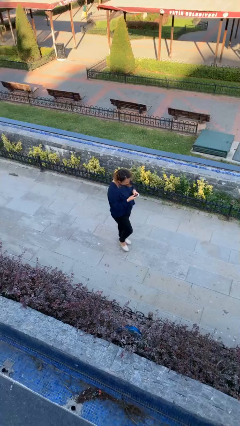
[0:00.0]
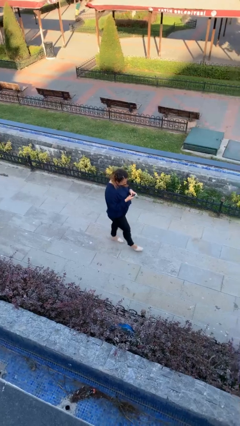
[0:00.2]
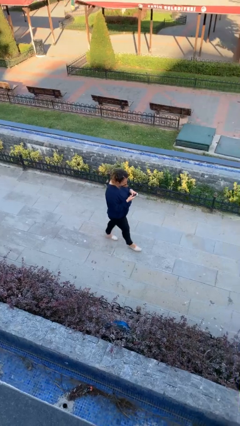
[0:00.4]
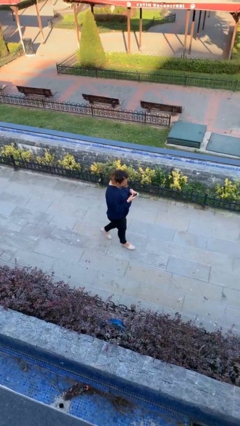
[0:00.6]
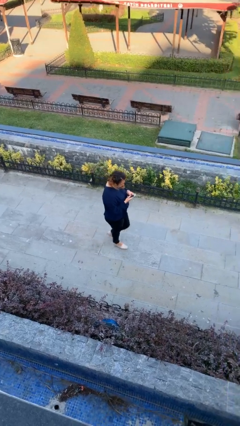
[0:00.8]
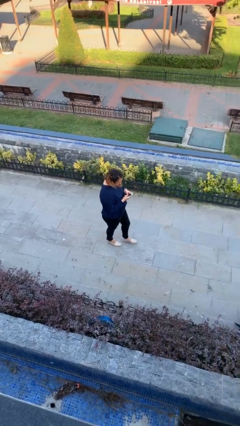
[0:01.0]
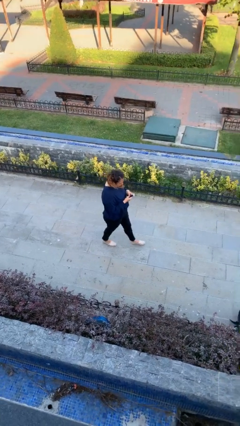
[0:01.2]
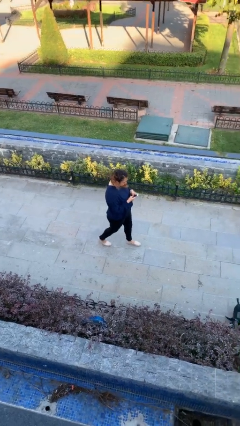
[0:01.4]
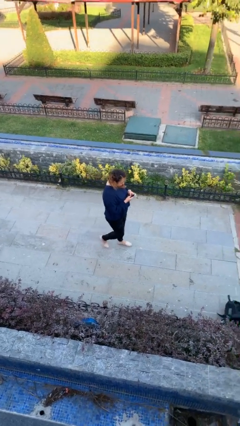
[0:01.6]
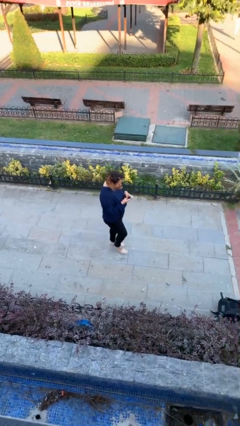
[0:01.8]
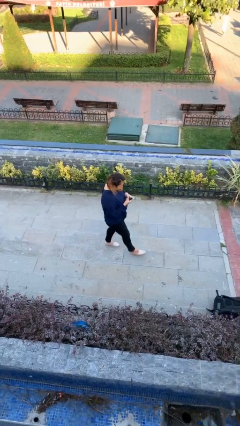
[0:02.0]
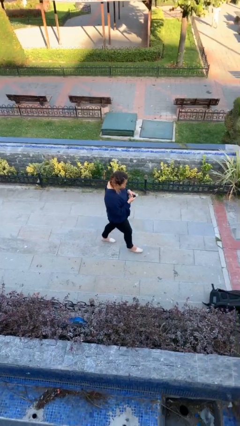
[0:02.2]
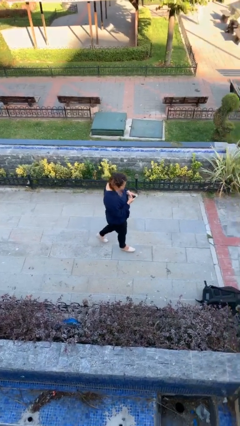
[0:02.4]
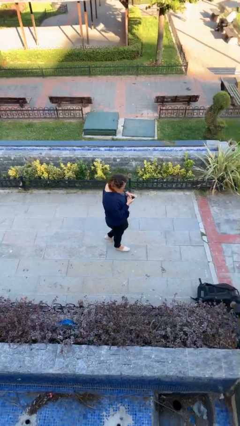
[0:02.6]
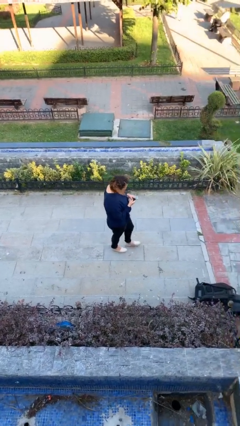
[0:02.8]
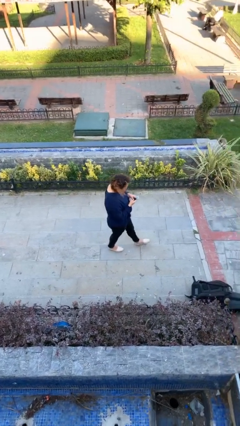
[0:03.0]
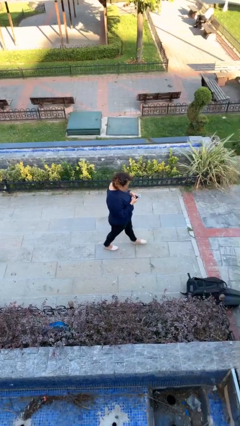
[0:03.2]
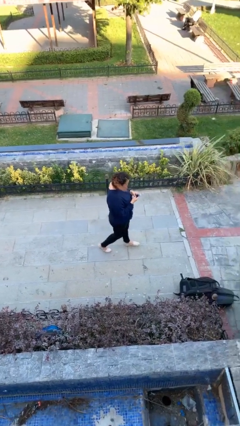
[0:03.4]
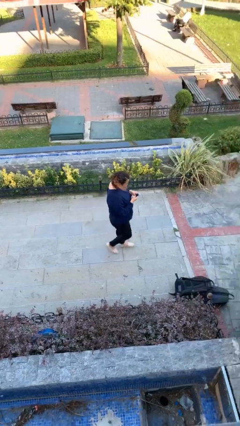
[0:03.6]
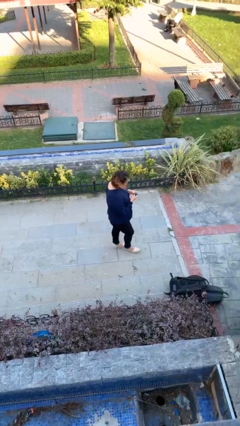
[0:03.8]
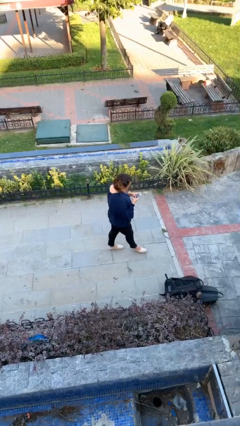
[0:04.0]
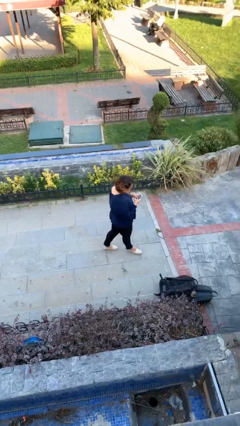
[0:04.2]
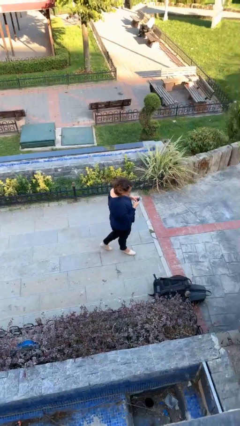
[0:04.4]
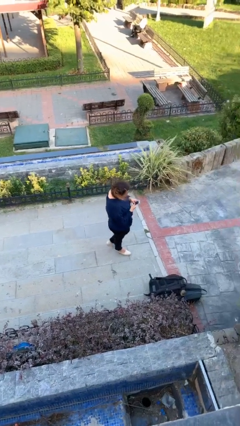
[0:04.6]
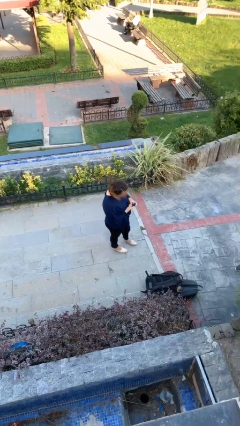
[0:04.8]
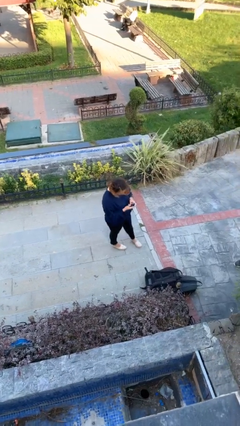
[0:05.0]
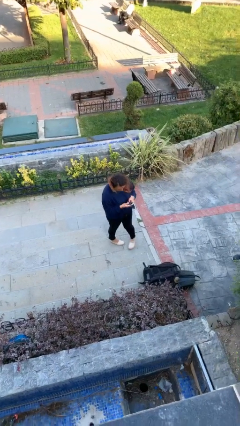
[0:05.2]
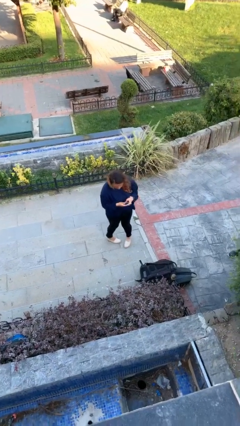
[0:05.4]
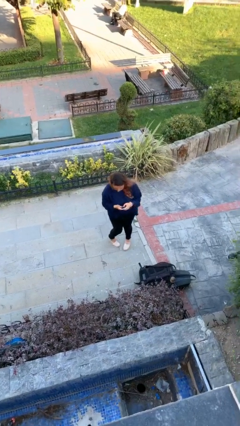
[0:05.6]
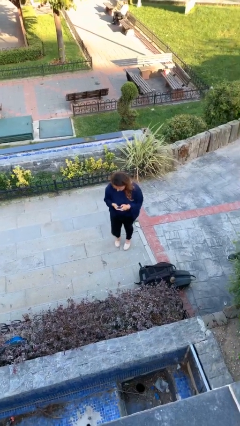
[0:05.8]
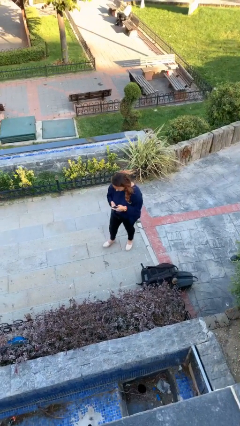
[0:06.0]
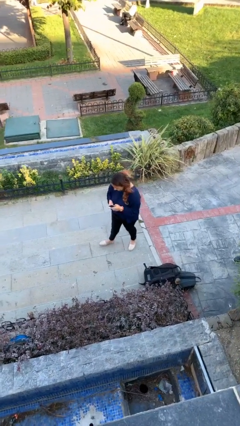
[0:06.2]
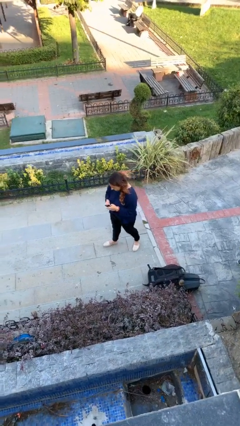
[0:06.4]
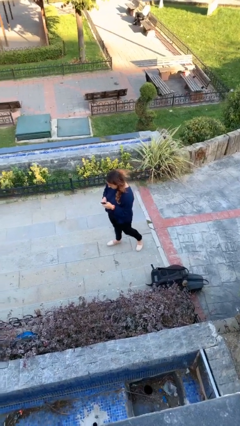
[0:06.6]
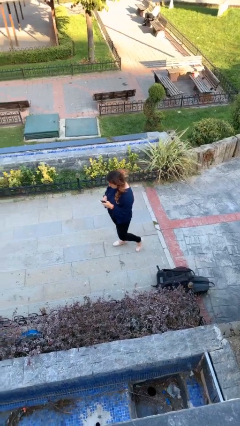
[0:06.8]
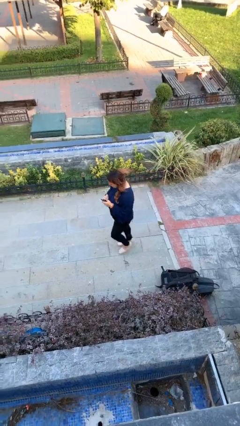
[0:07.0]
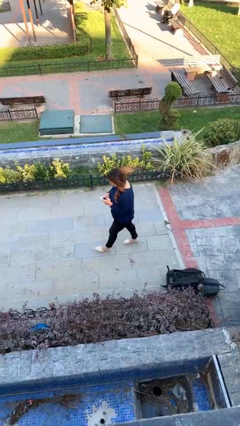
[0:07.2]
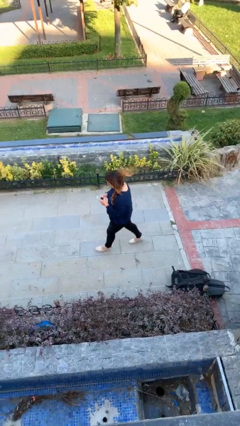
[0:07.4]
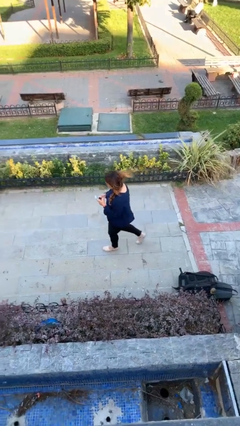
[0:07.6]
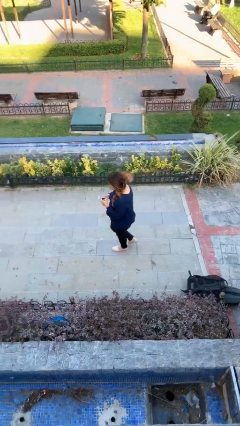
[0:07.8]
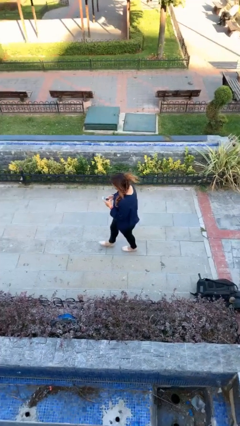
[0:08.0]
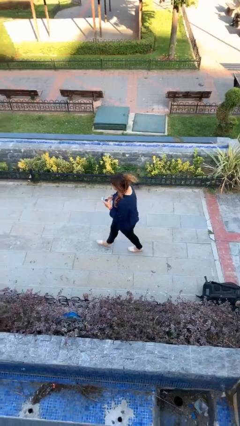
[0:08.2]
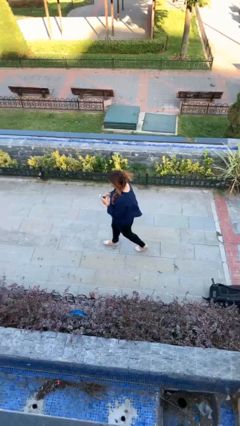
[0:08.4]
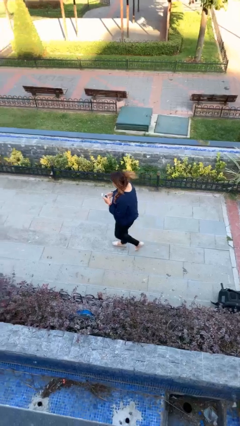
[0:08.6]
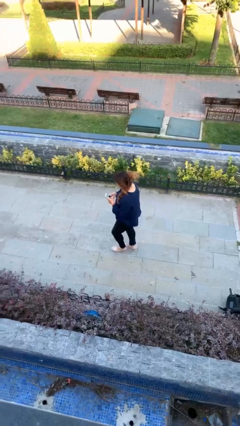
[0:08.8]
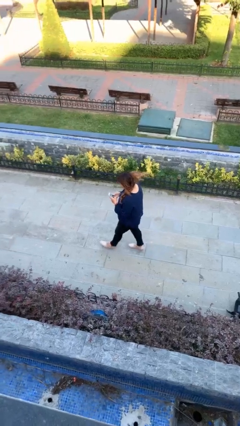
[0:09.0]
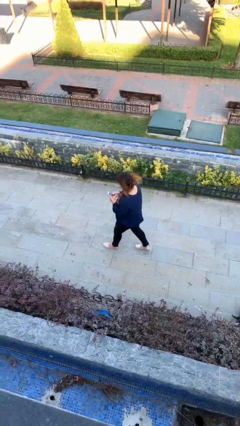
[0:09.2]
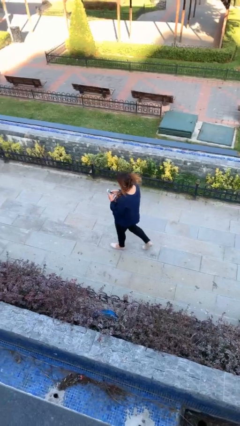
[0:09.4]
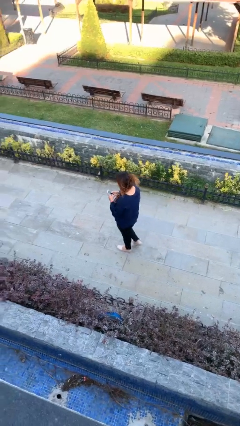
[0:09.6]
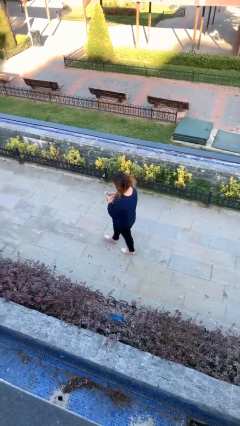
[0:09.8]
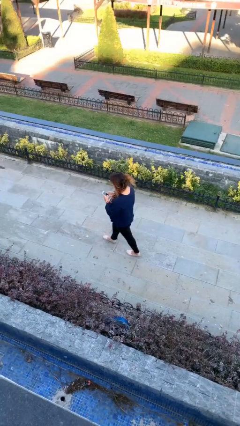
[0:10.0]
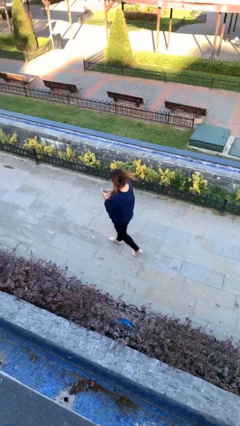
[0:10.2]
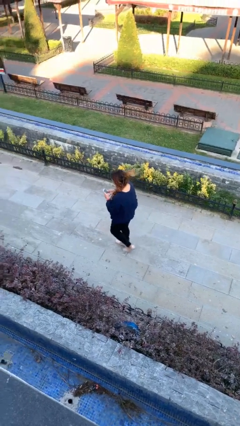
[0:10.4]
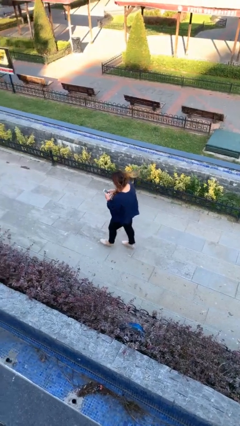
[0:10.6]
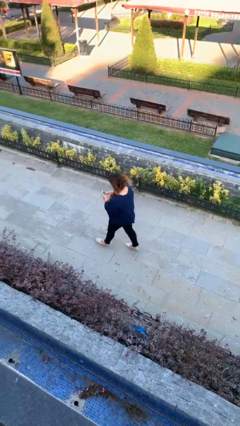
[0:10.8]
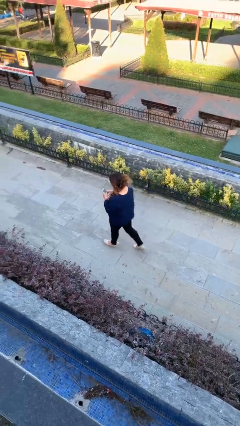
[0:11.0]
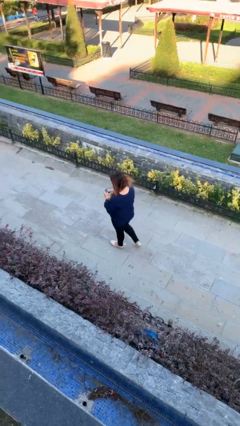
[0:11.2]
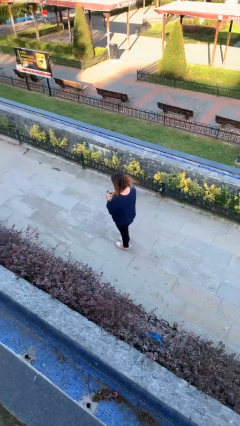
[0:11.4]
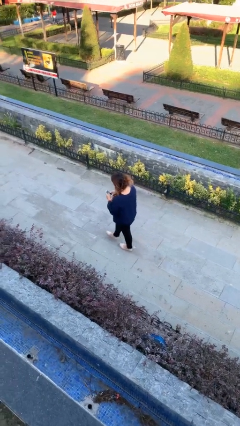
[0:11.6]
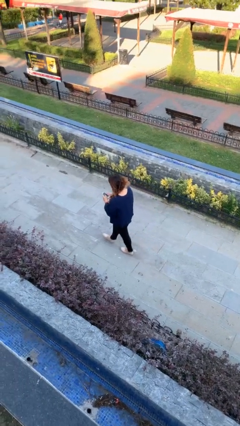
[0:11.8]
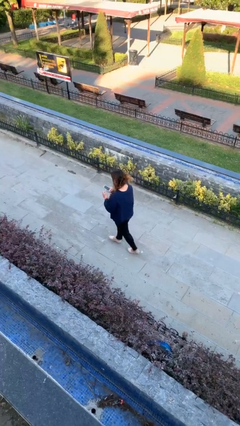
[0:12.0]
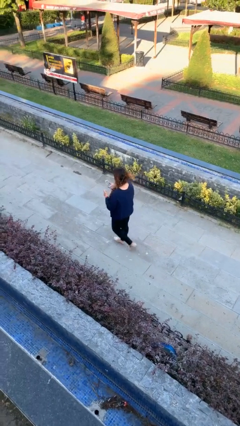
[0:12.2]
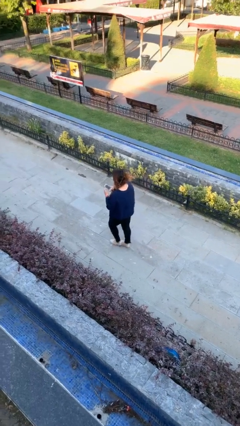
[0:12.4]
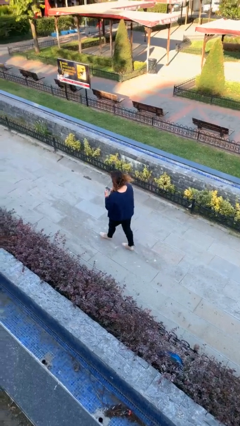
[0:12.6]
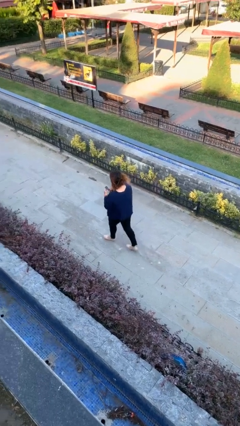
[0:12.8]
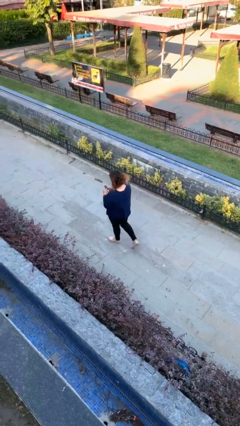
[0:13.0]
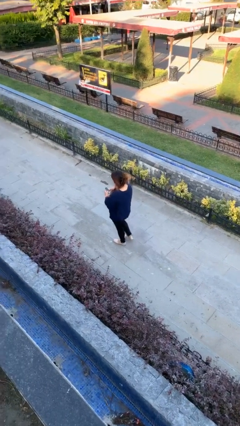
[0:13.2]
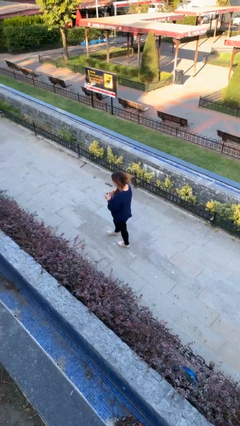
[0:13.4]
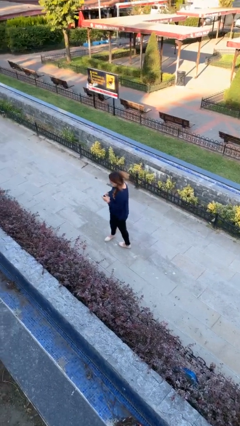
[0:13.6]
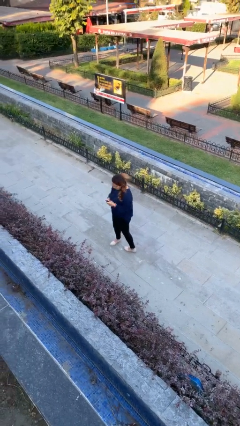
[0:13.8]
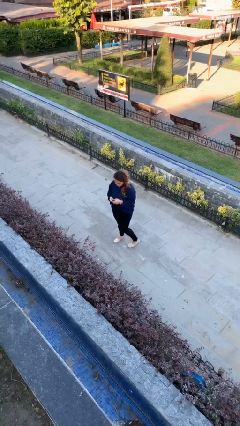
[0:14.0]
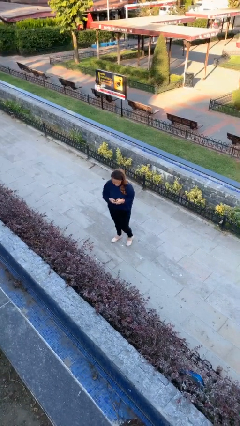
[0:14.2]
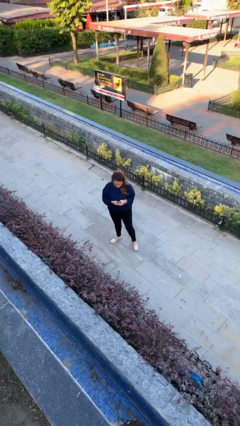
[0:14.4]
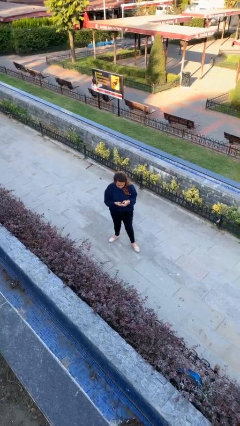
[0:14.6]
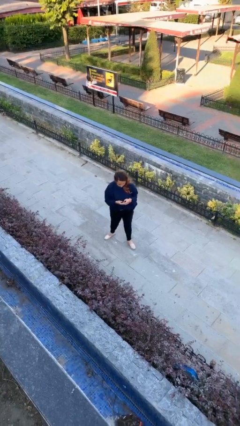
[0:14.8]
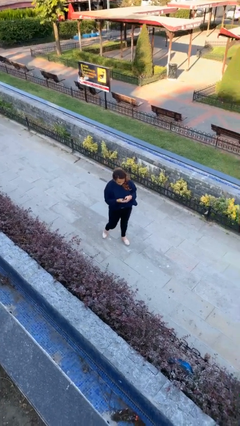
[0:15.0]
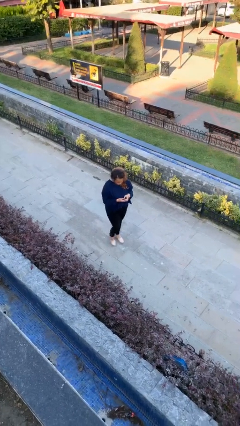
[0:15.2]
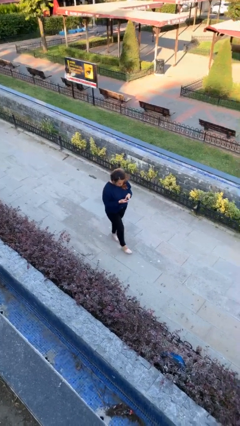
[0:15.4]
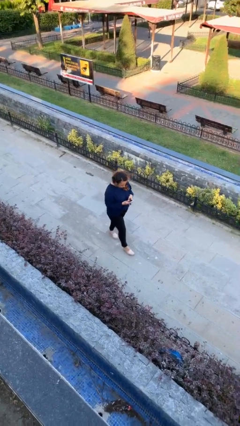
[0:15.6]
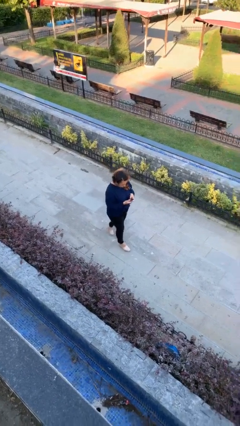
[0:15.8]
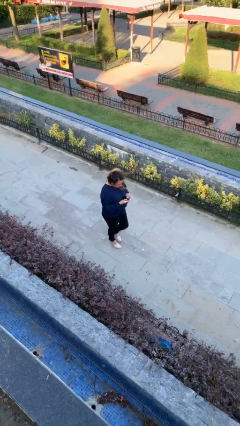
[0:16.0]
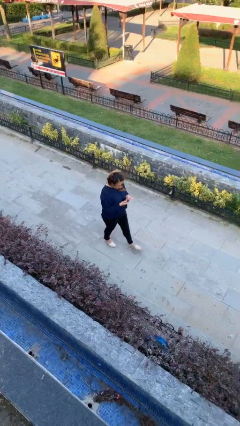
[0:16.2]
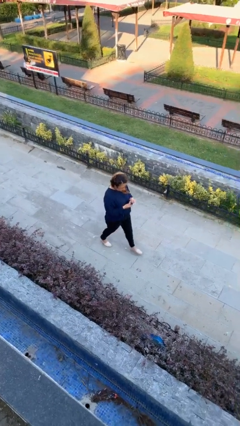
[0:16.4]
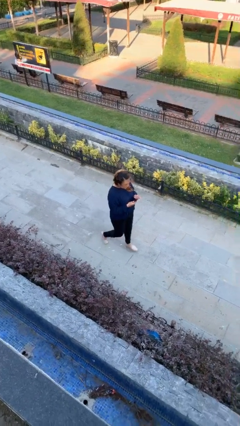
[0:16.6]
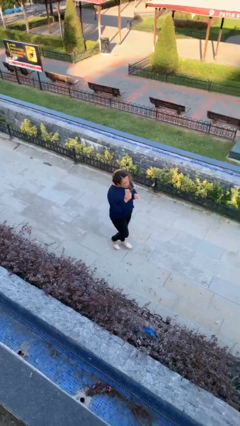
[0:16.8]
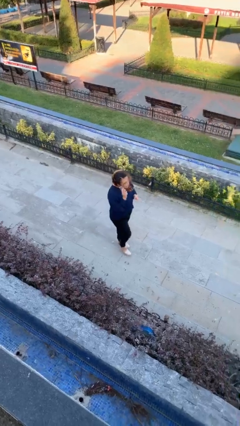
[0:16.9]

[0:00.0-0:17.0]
person texts on phone

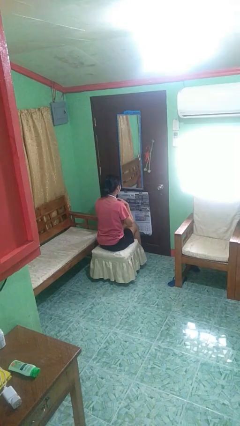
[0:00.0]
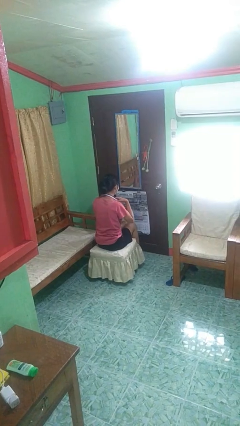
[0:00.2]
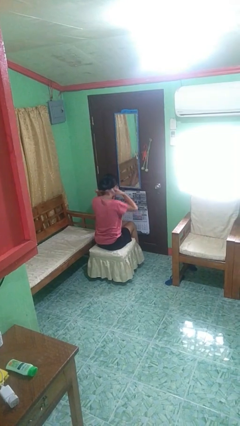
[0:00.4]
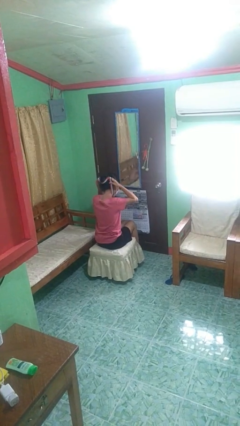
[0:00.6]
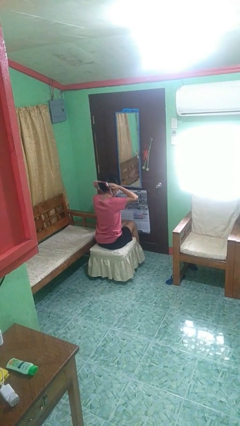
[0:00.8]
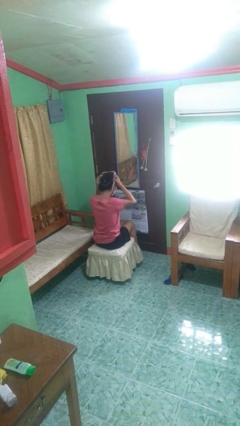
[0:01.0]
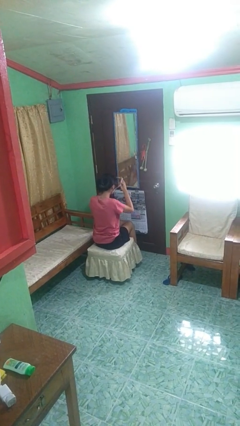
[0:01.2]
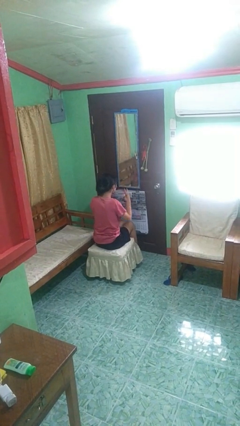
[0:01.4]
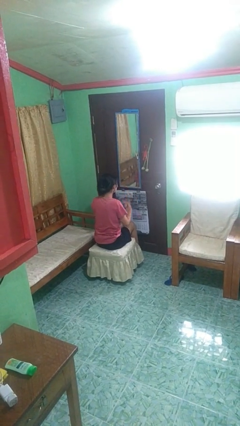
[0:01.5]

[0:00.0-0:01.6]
person takes off necklace
